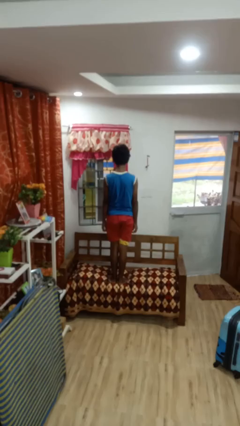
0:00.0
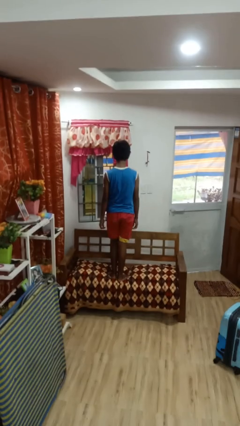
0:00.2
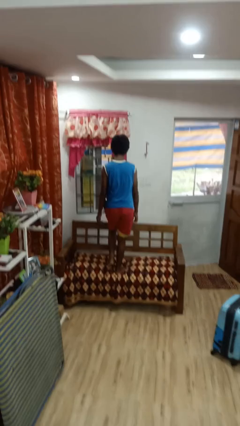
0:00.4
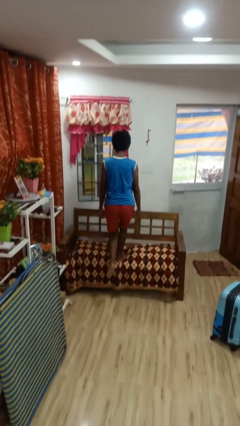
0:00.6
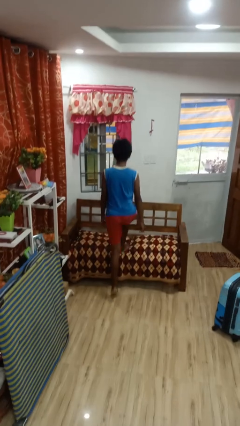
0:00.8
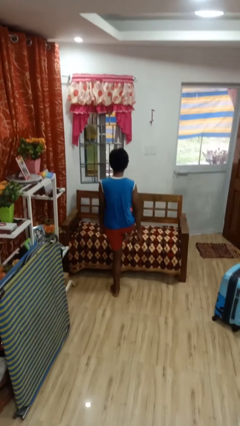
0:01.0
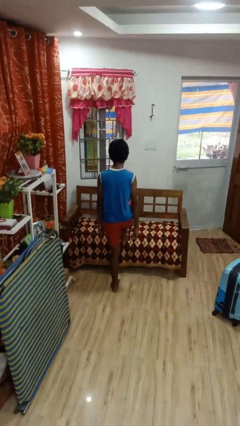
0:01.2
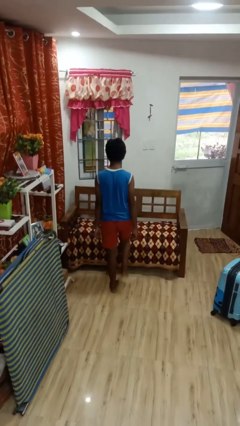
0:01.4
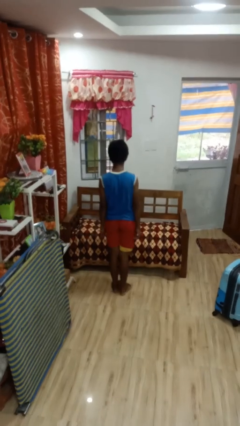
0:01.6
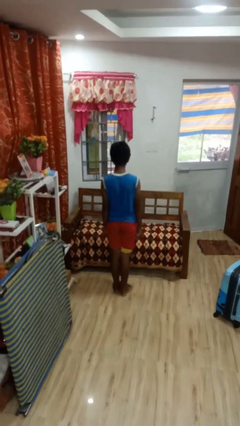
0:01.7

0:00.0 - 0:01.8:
person climbs off couch

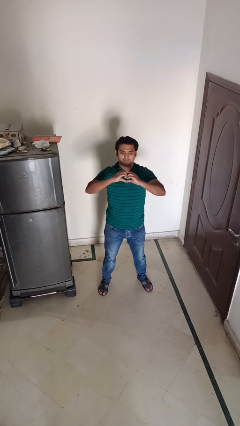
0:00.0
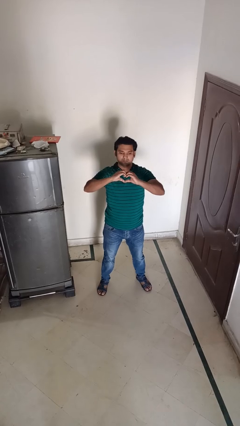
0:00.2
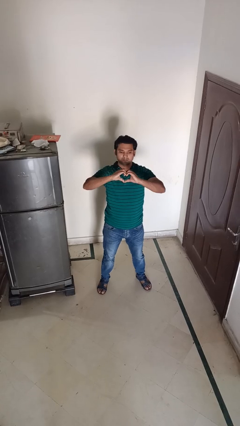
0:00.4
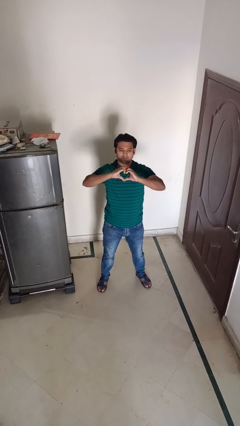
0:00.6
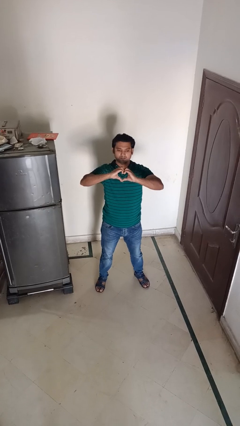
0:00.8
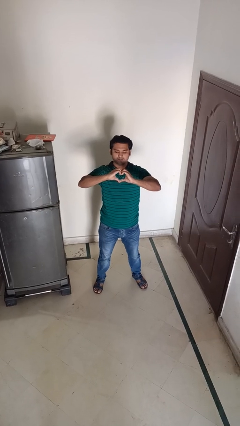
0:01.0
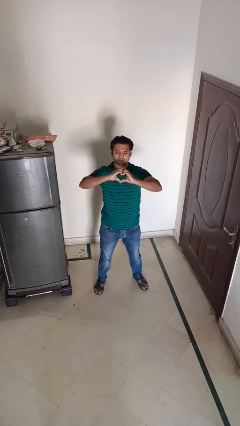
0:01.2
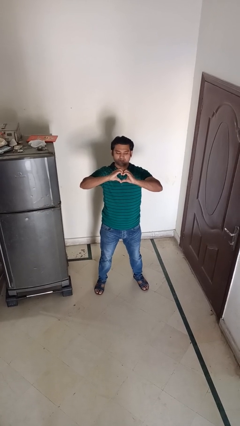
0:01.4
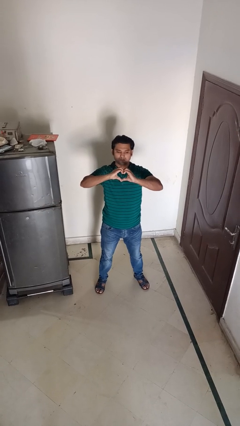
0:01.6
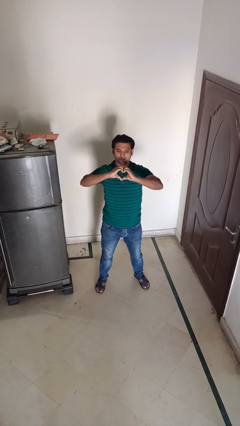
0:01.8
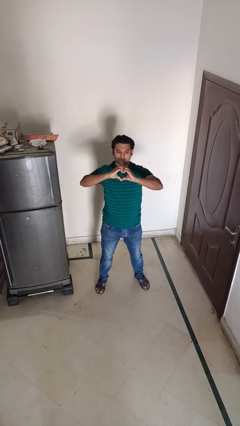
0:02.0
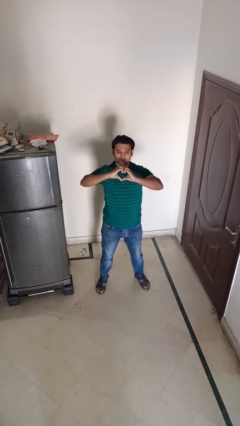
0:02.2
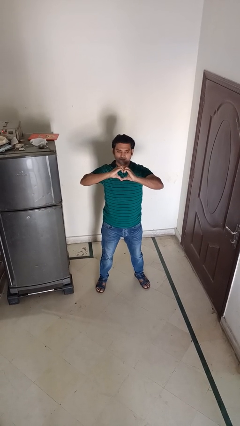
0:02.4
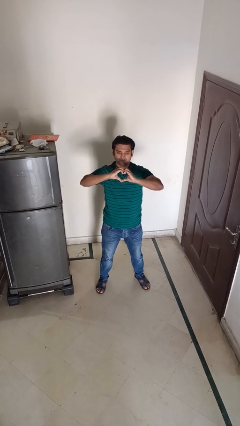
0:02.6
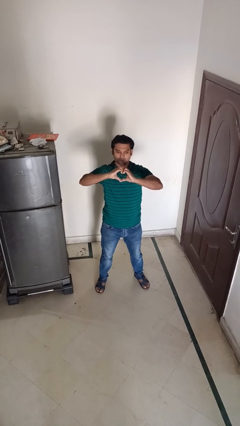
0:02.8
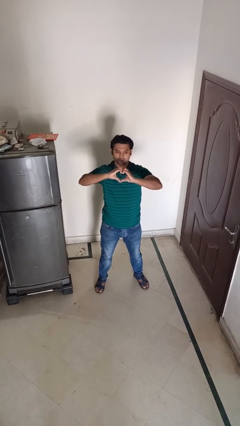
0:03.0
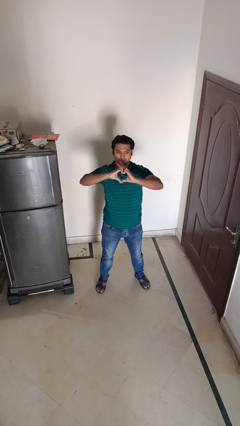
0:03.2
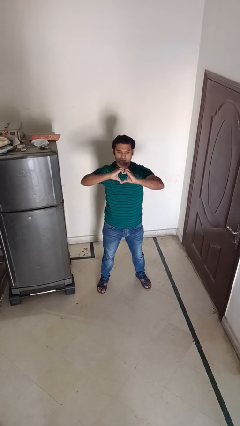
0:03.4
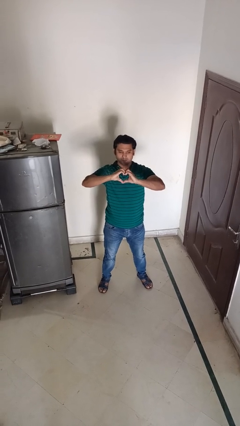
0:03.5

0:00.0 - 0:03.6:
person gestures heart

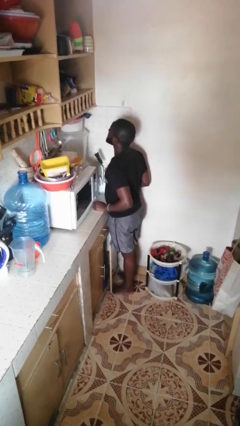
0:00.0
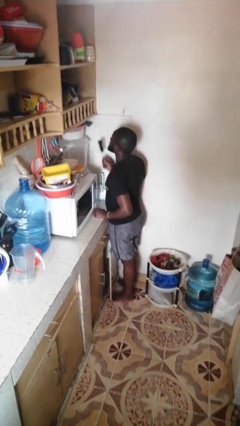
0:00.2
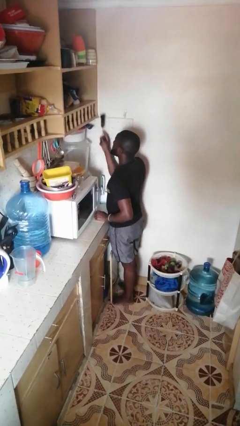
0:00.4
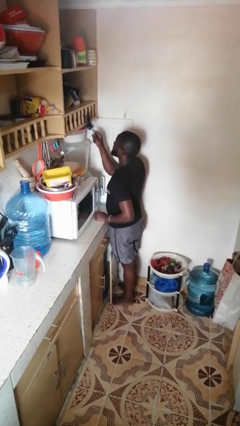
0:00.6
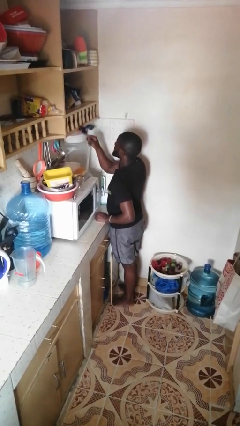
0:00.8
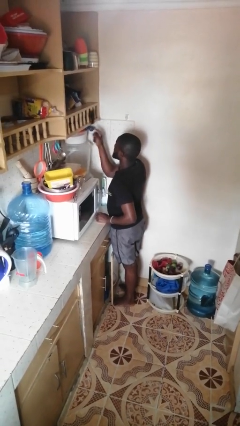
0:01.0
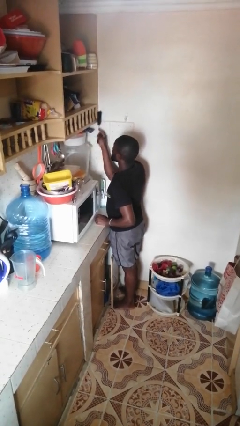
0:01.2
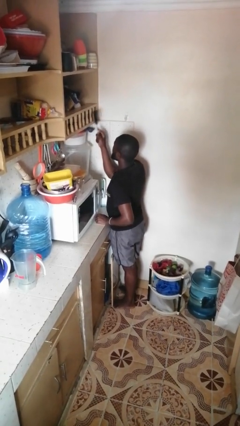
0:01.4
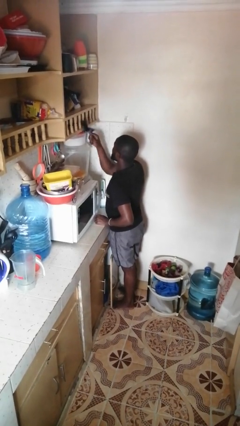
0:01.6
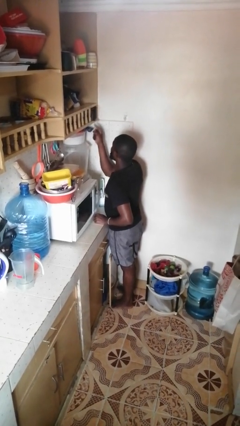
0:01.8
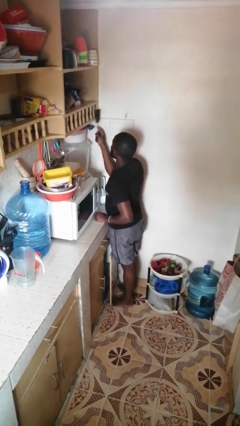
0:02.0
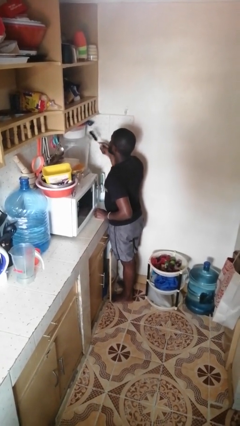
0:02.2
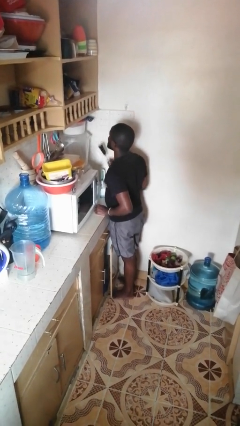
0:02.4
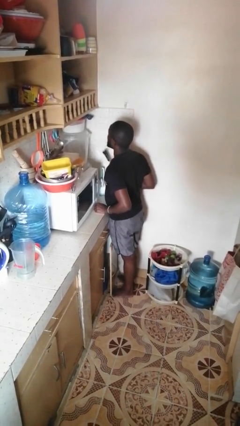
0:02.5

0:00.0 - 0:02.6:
person dusts furniture

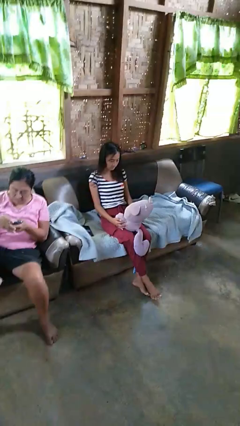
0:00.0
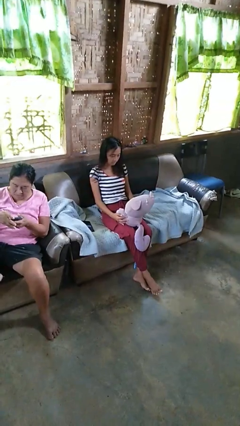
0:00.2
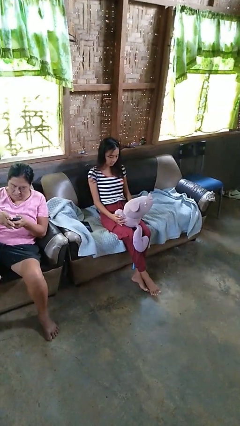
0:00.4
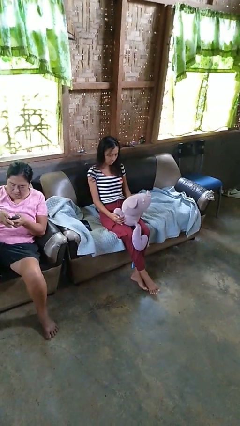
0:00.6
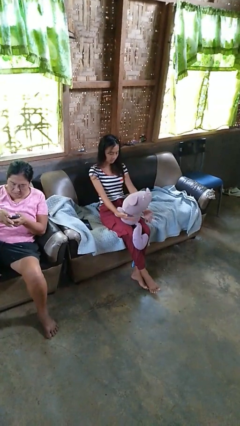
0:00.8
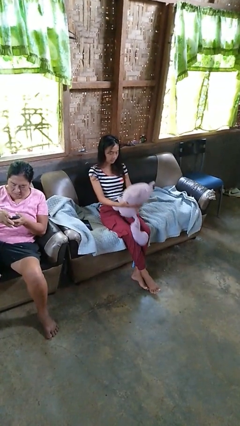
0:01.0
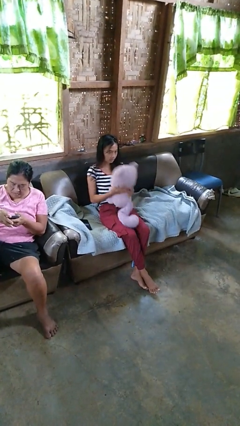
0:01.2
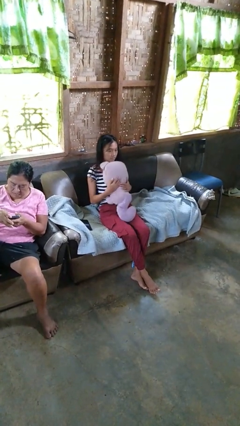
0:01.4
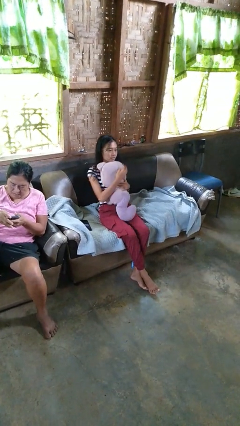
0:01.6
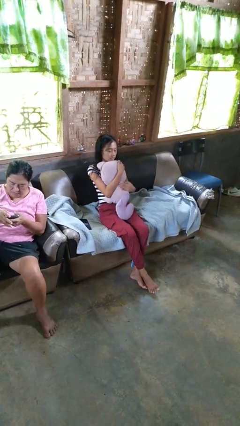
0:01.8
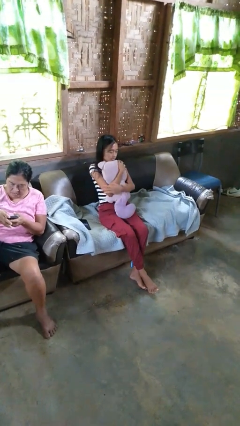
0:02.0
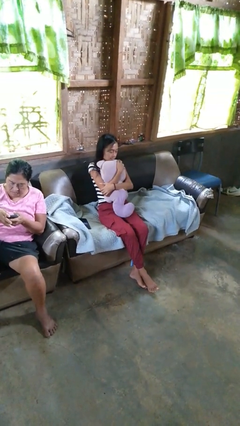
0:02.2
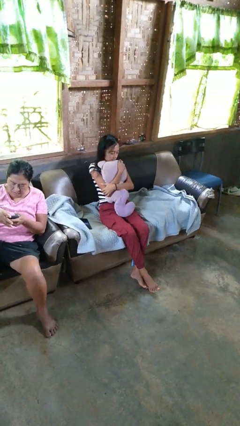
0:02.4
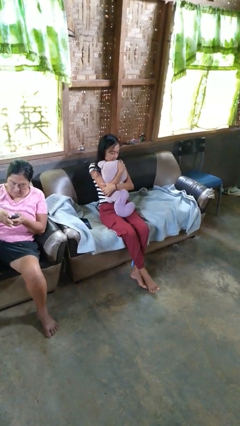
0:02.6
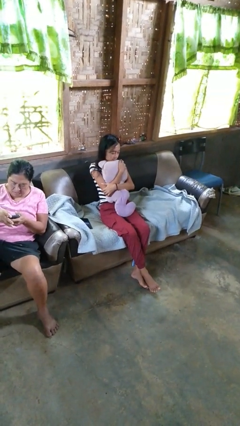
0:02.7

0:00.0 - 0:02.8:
person hugs stuffed animal

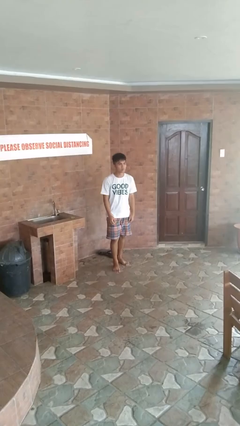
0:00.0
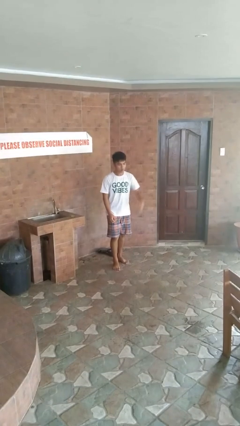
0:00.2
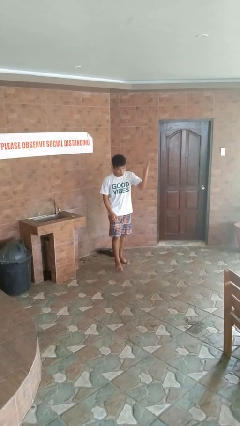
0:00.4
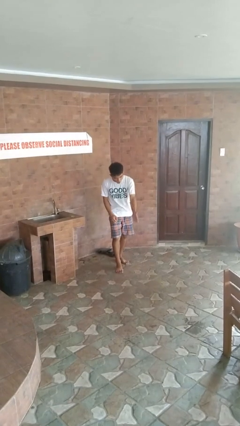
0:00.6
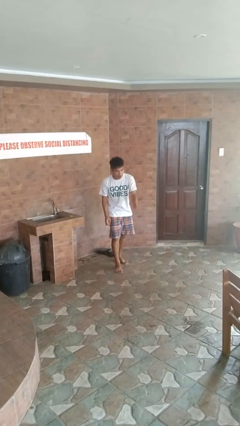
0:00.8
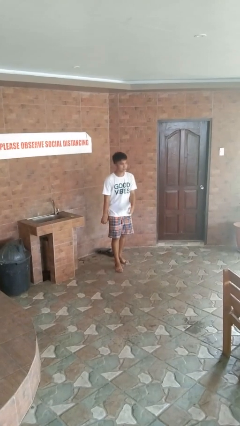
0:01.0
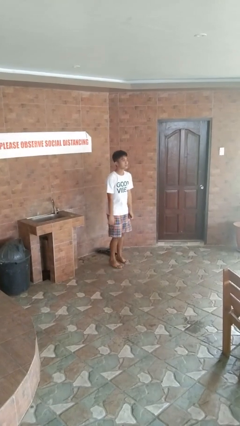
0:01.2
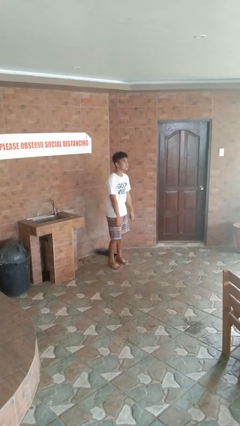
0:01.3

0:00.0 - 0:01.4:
person karate chop

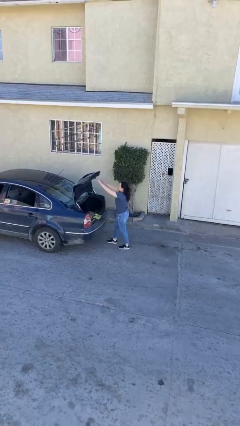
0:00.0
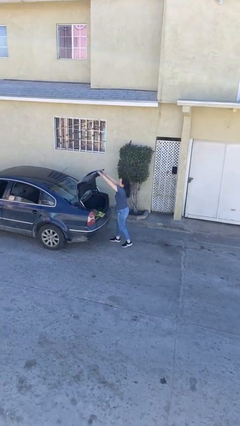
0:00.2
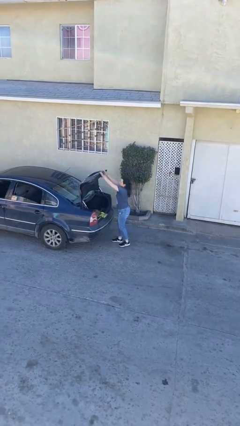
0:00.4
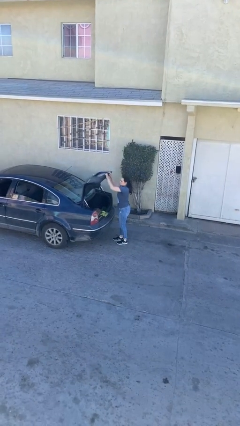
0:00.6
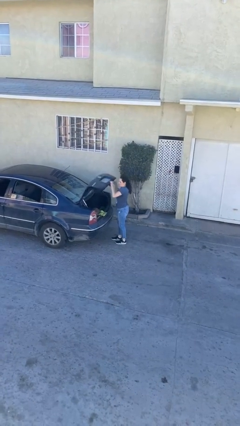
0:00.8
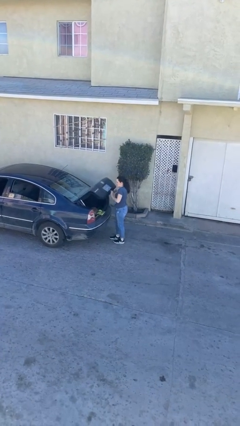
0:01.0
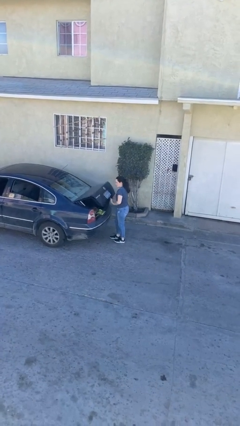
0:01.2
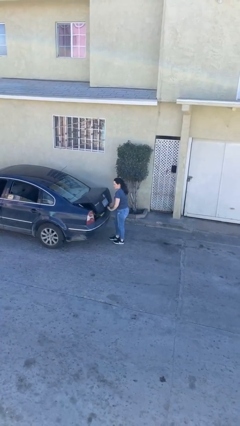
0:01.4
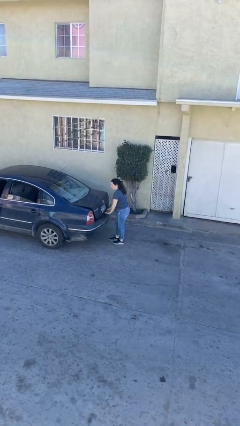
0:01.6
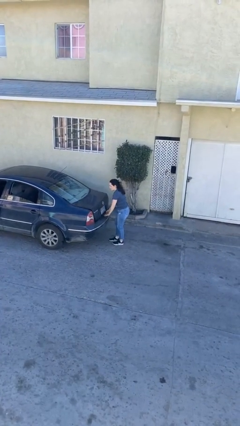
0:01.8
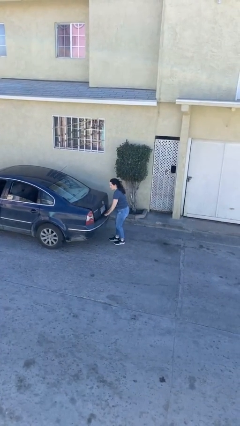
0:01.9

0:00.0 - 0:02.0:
person closes car trunk

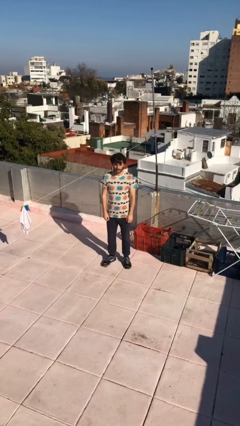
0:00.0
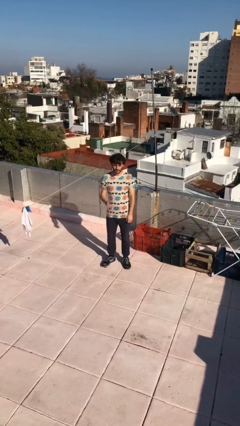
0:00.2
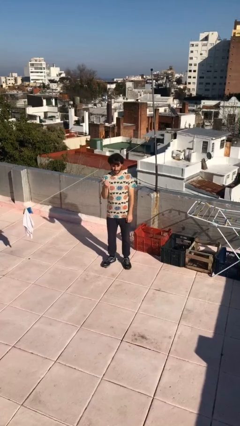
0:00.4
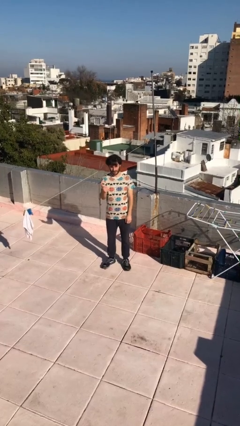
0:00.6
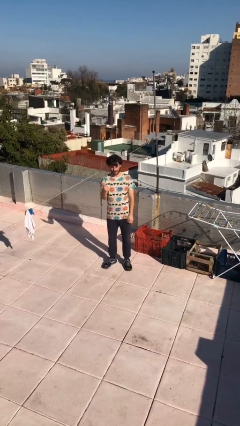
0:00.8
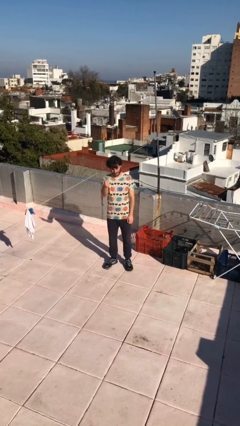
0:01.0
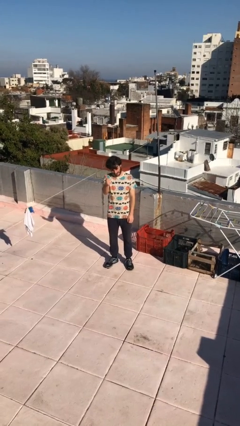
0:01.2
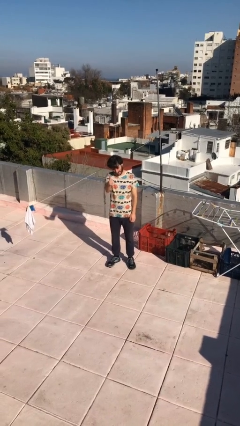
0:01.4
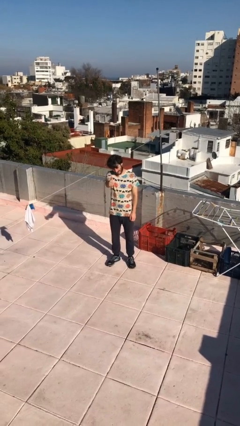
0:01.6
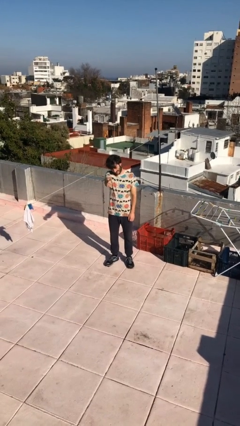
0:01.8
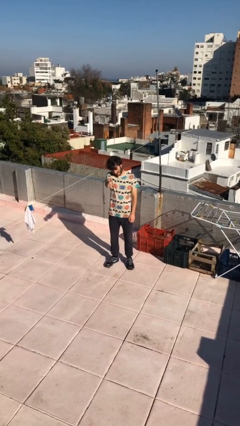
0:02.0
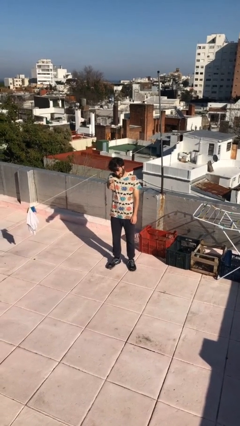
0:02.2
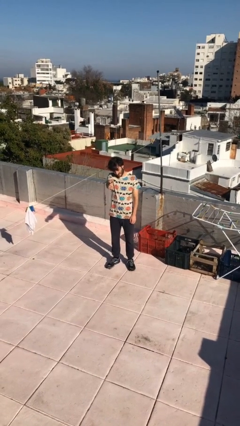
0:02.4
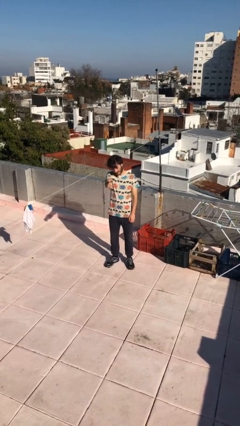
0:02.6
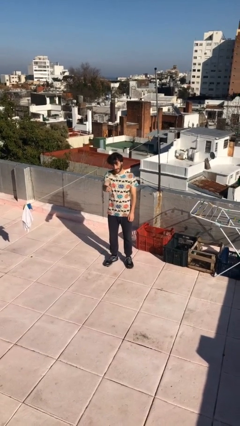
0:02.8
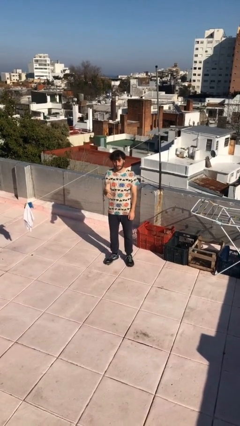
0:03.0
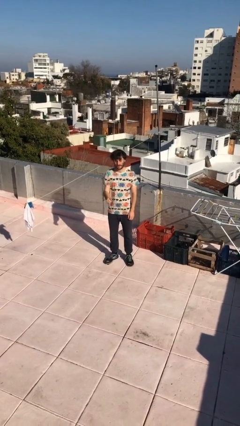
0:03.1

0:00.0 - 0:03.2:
person gestures thumbs up
